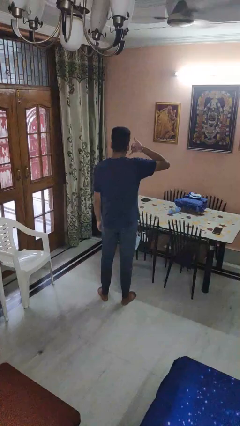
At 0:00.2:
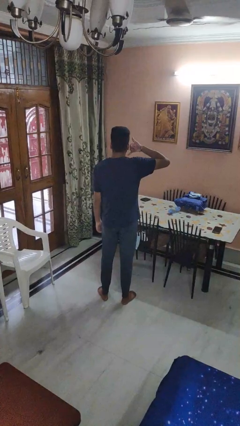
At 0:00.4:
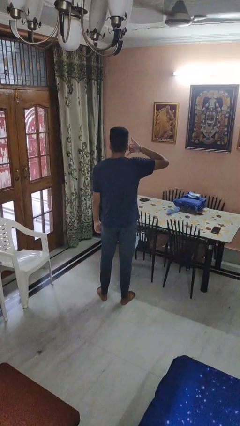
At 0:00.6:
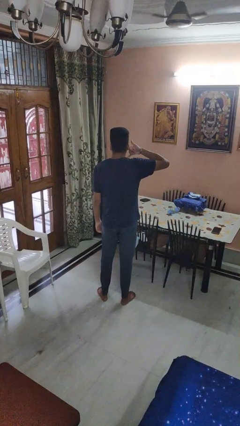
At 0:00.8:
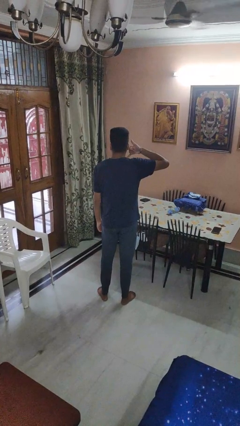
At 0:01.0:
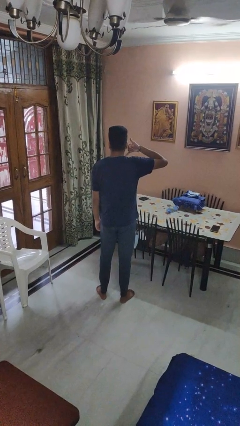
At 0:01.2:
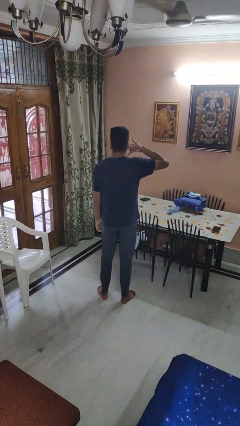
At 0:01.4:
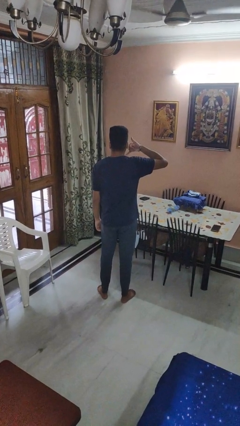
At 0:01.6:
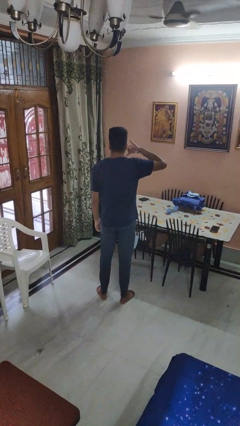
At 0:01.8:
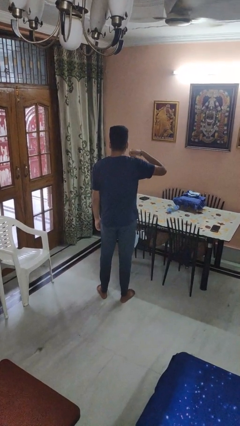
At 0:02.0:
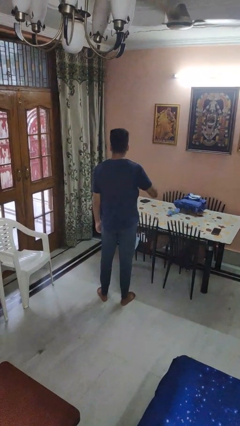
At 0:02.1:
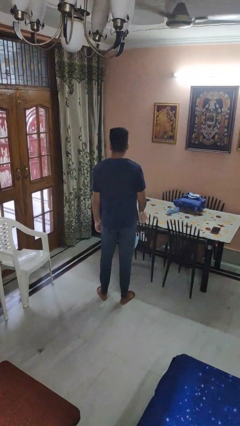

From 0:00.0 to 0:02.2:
person gestures call me

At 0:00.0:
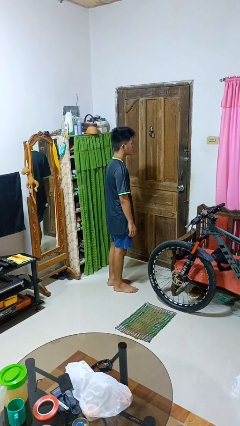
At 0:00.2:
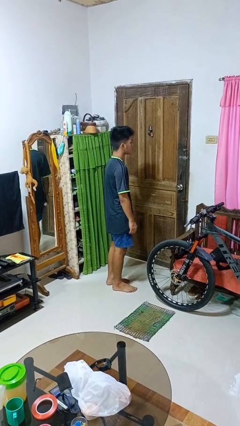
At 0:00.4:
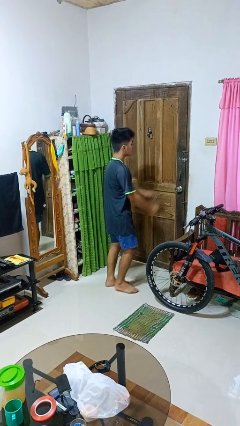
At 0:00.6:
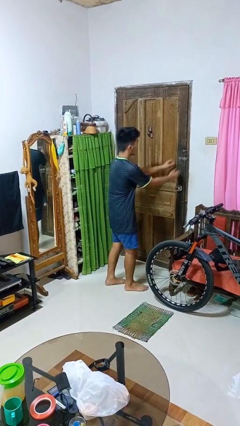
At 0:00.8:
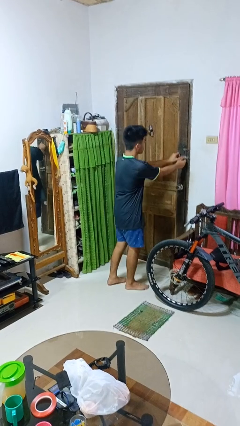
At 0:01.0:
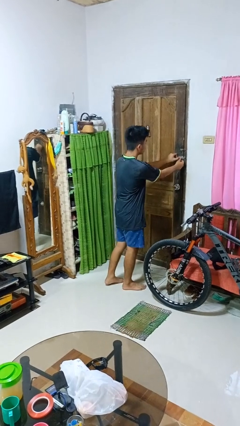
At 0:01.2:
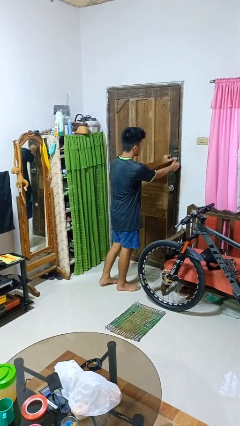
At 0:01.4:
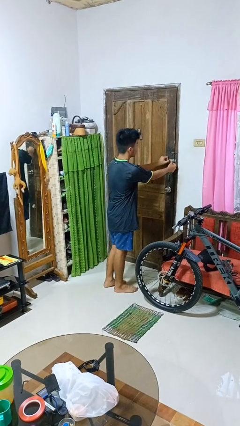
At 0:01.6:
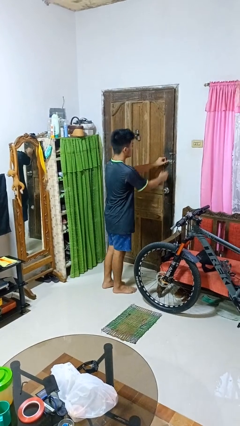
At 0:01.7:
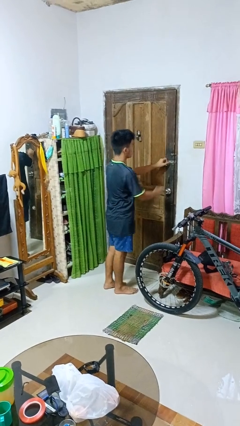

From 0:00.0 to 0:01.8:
person unlocks door with keys

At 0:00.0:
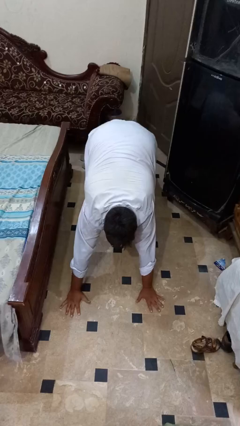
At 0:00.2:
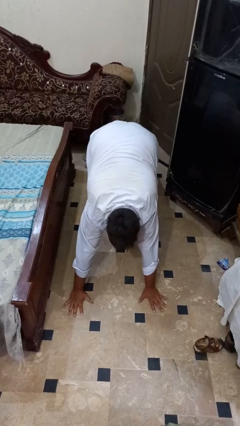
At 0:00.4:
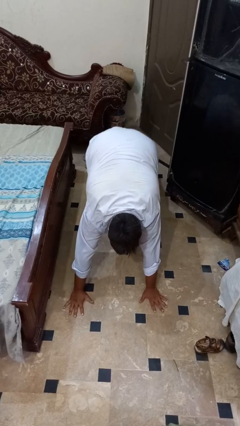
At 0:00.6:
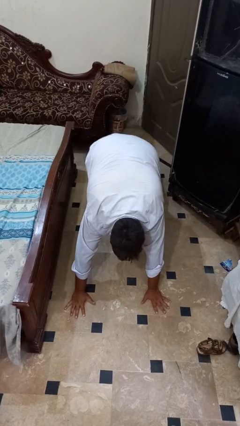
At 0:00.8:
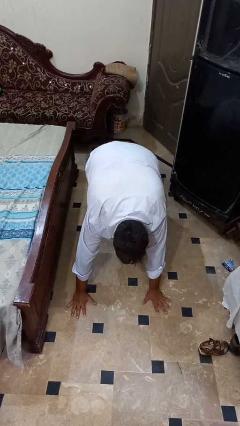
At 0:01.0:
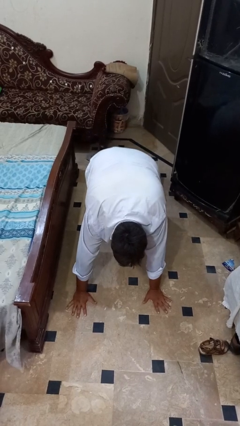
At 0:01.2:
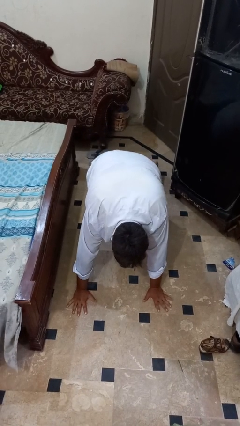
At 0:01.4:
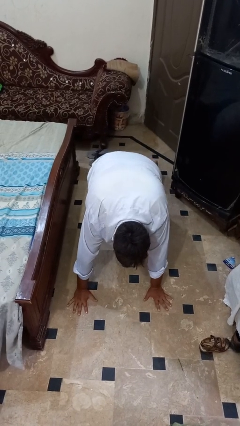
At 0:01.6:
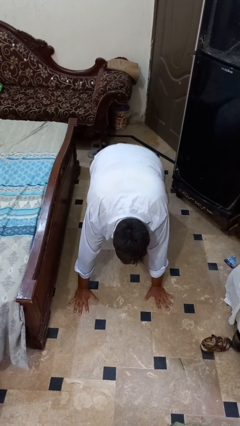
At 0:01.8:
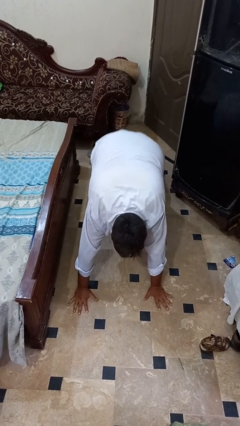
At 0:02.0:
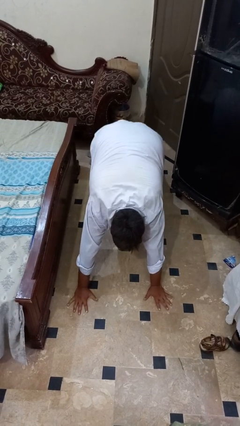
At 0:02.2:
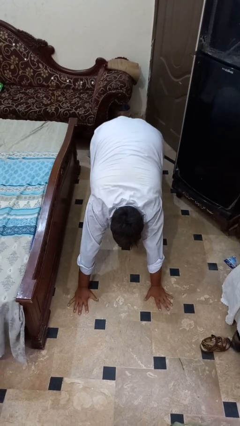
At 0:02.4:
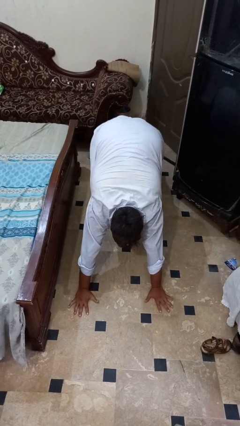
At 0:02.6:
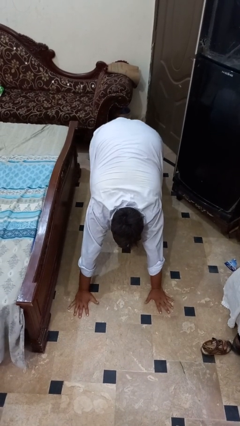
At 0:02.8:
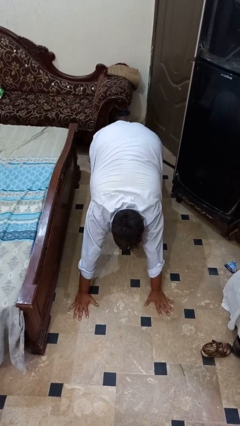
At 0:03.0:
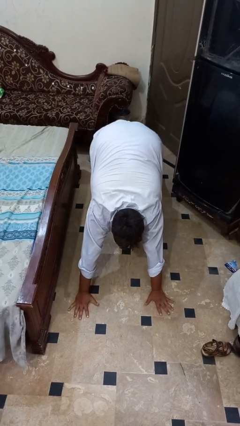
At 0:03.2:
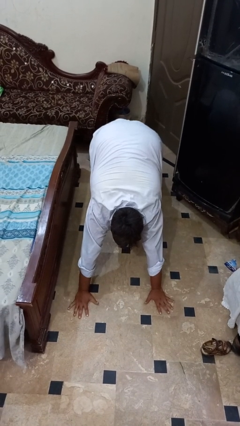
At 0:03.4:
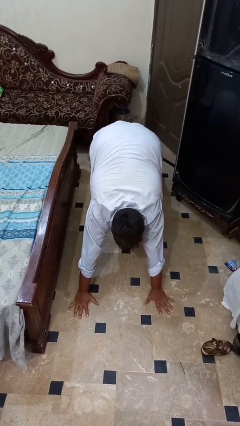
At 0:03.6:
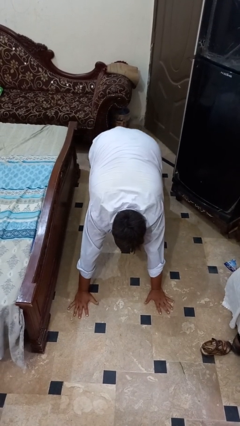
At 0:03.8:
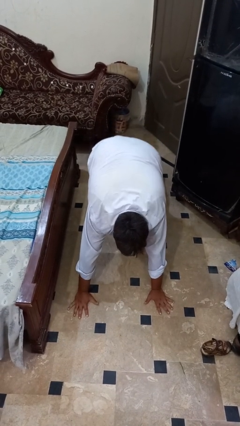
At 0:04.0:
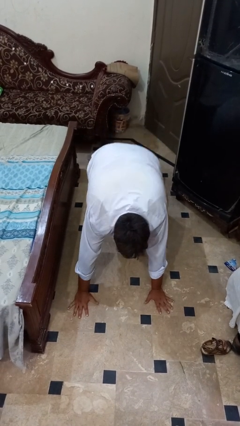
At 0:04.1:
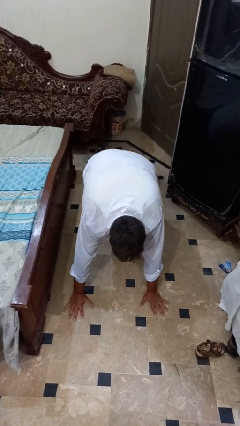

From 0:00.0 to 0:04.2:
person exercises with pushup

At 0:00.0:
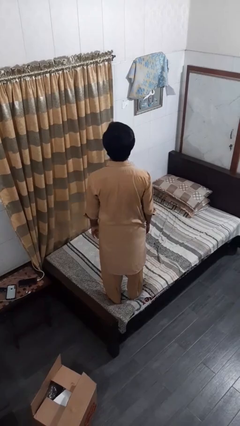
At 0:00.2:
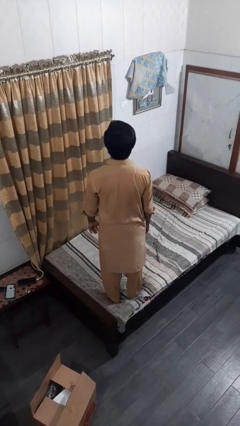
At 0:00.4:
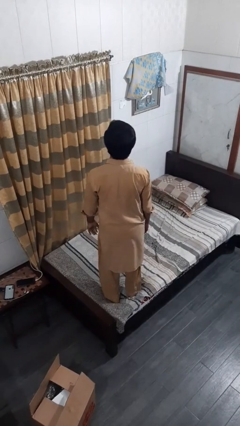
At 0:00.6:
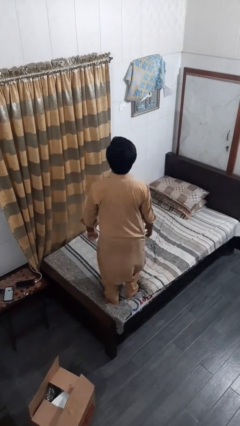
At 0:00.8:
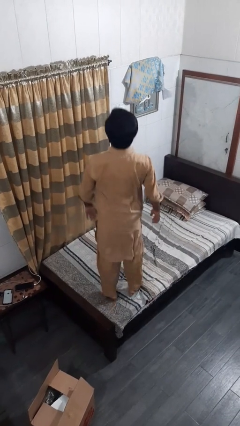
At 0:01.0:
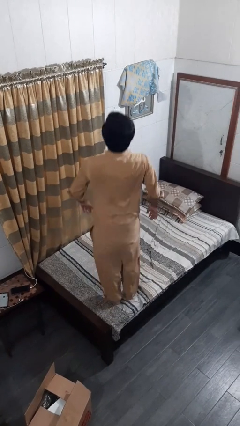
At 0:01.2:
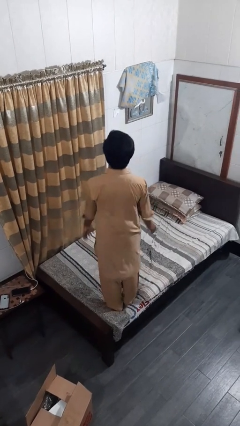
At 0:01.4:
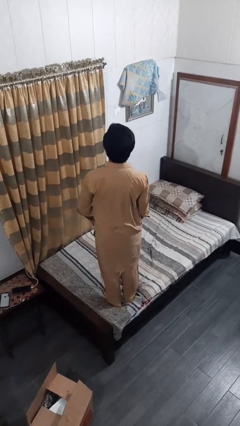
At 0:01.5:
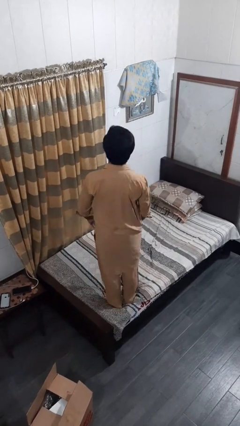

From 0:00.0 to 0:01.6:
person jumps on bed

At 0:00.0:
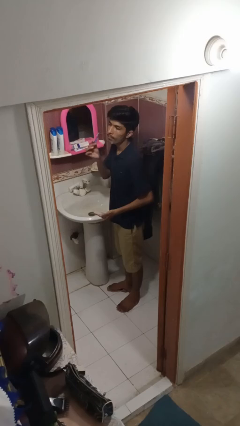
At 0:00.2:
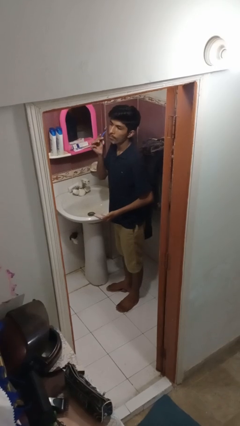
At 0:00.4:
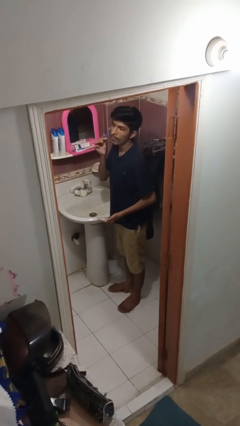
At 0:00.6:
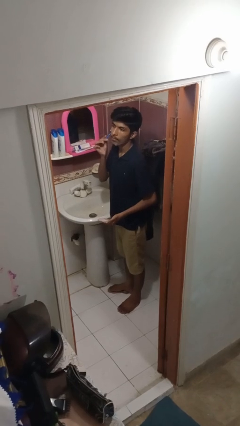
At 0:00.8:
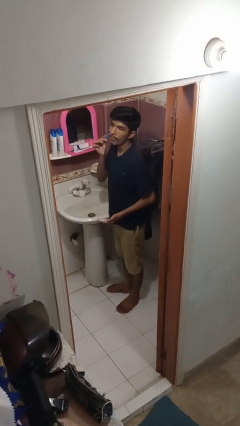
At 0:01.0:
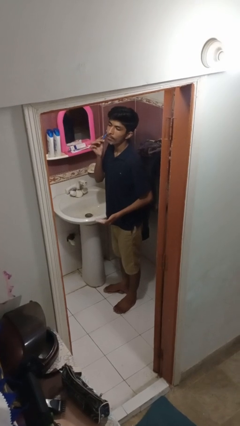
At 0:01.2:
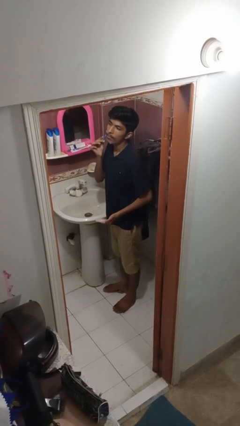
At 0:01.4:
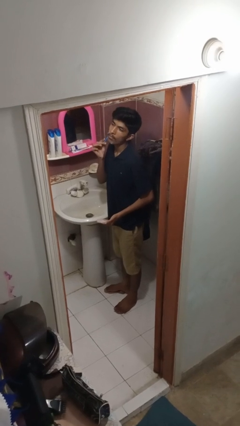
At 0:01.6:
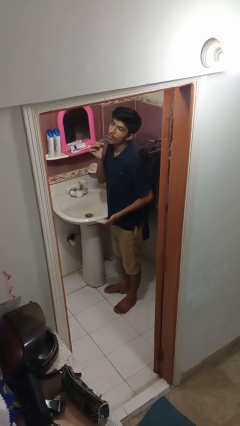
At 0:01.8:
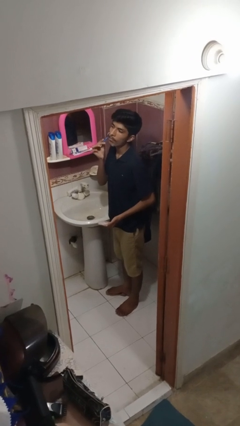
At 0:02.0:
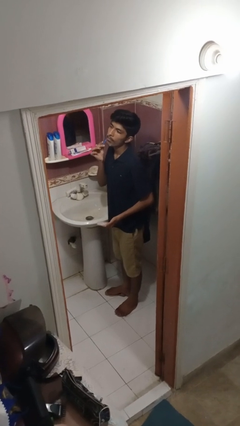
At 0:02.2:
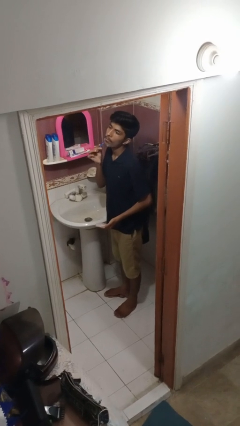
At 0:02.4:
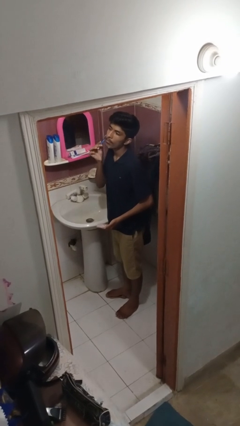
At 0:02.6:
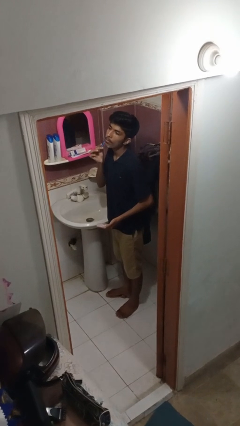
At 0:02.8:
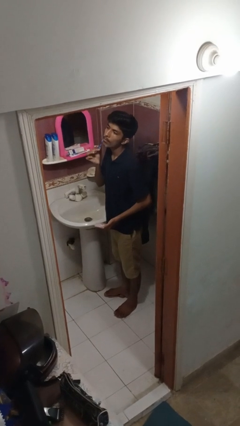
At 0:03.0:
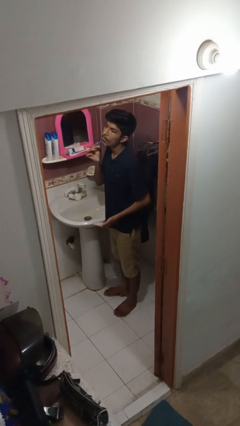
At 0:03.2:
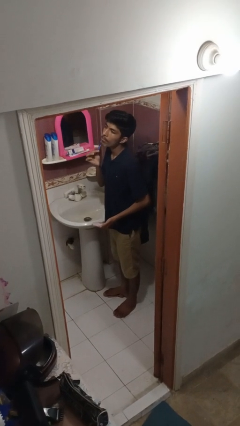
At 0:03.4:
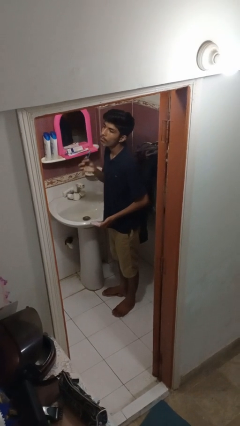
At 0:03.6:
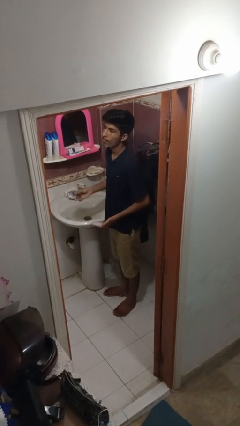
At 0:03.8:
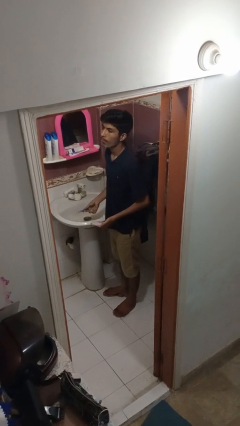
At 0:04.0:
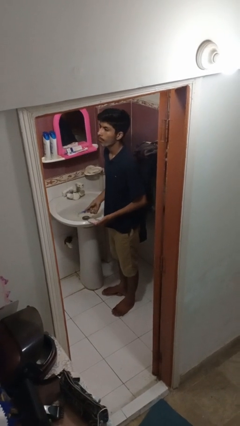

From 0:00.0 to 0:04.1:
person shaves face

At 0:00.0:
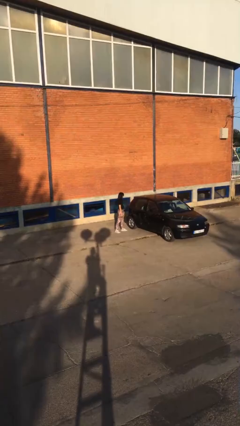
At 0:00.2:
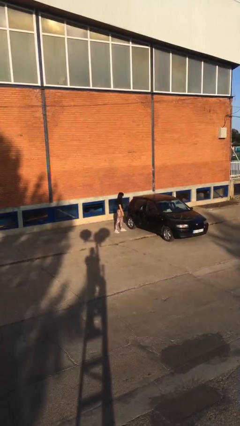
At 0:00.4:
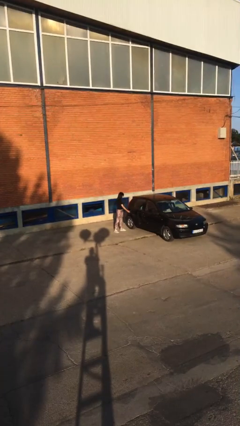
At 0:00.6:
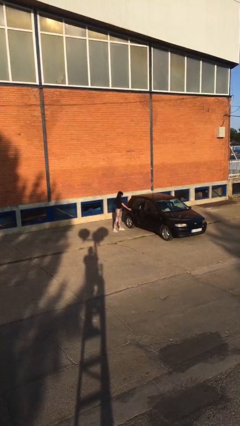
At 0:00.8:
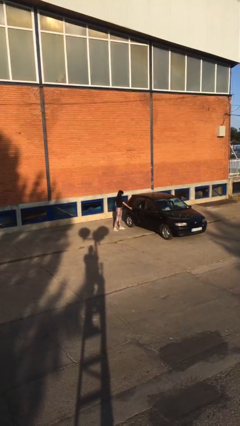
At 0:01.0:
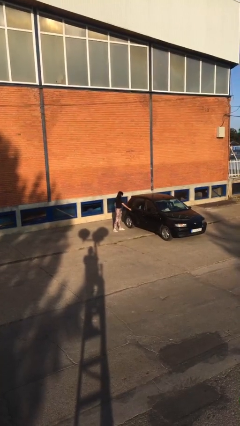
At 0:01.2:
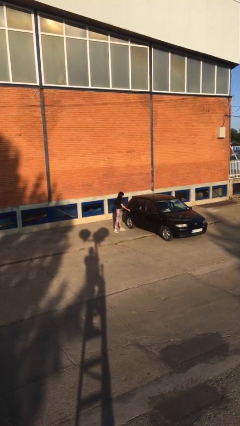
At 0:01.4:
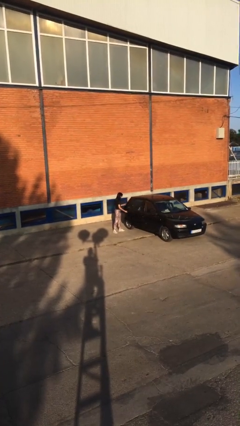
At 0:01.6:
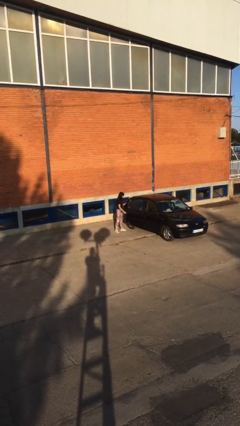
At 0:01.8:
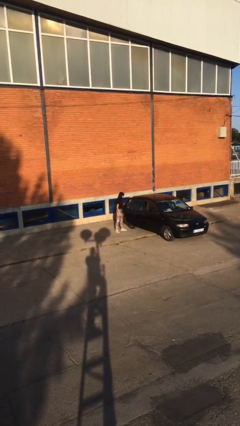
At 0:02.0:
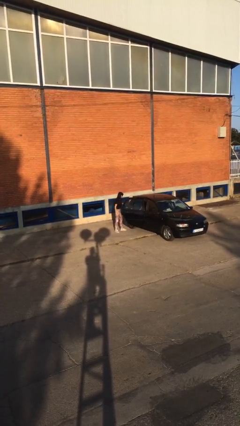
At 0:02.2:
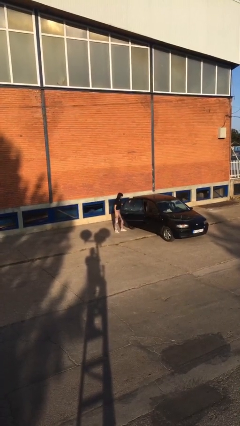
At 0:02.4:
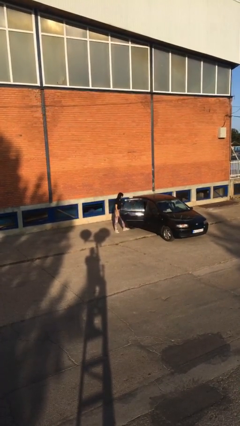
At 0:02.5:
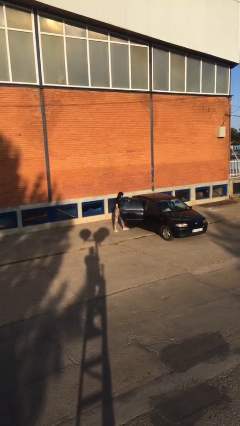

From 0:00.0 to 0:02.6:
person opens car door

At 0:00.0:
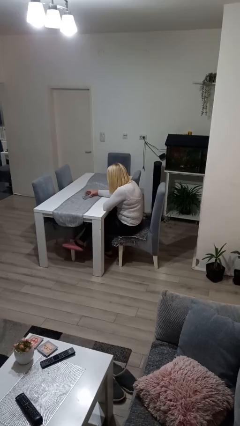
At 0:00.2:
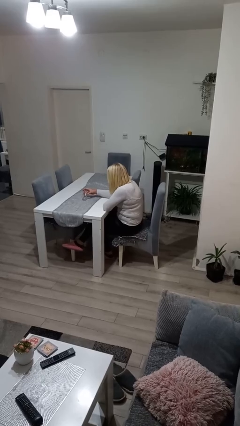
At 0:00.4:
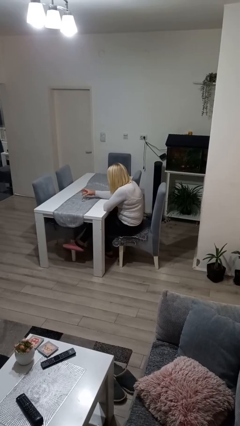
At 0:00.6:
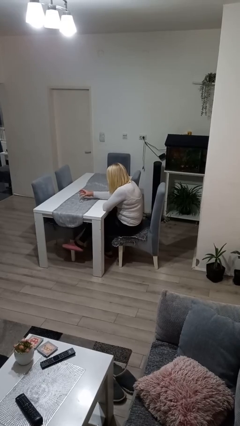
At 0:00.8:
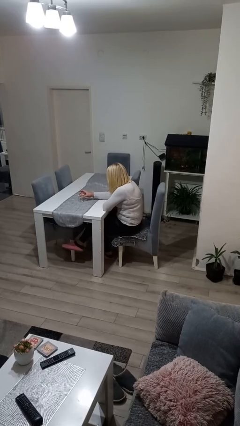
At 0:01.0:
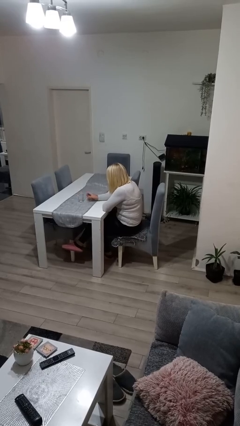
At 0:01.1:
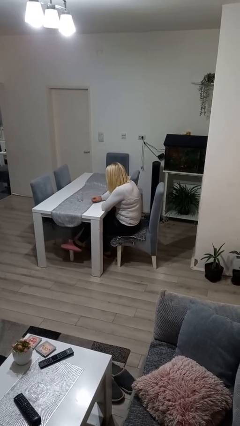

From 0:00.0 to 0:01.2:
person sets upright glass
